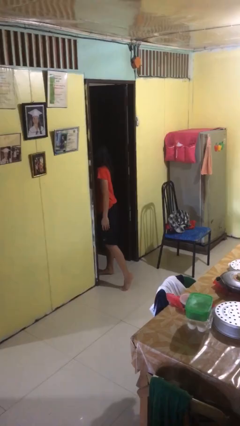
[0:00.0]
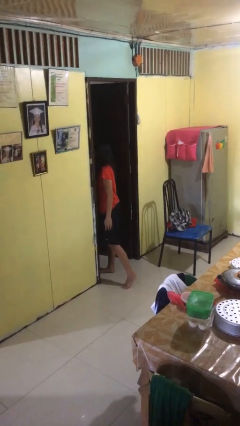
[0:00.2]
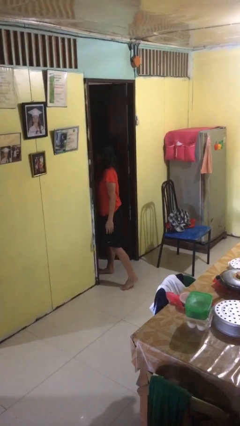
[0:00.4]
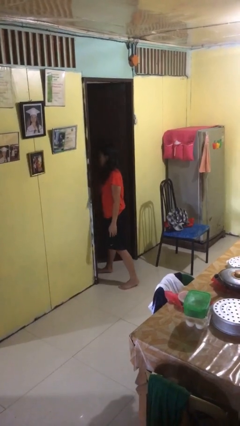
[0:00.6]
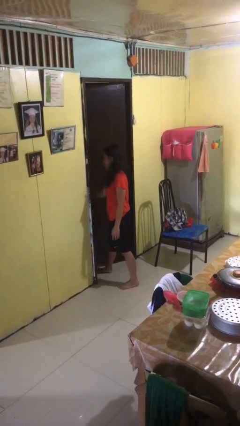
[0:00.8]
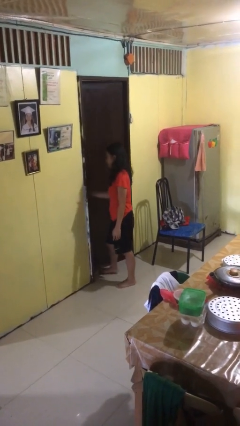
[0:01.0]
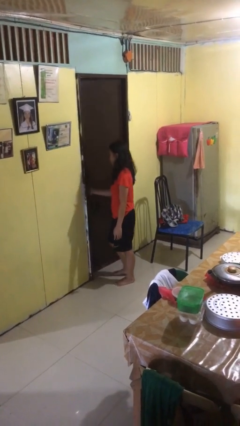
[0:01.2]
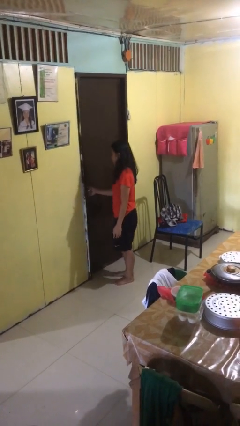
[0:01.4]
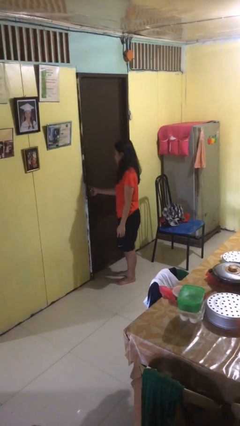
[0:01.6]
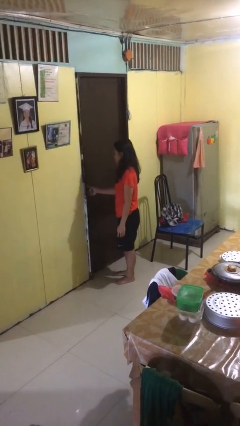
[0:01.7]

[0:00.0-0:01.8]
person closes facility door

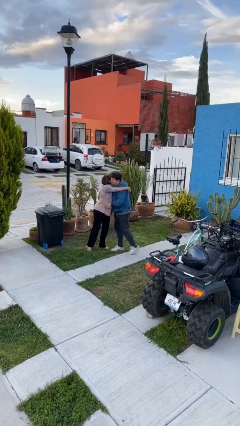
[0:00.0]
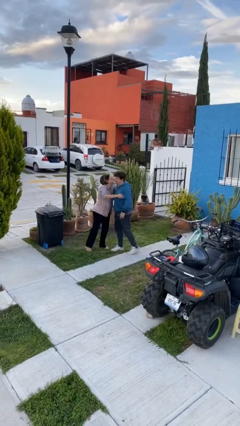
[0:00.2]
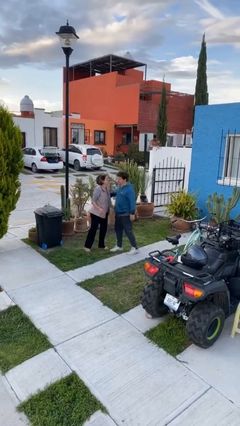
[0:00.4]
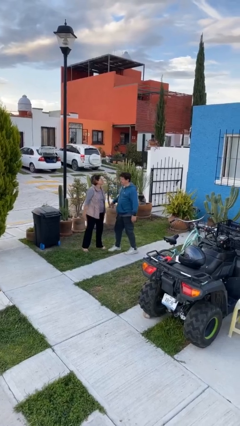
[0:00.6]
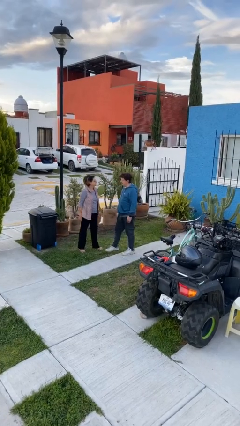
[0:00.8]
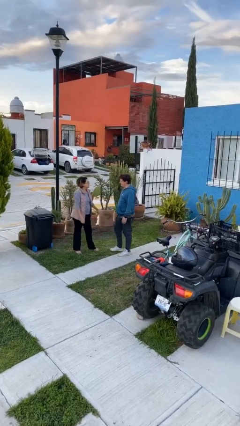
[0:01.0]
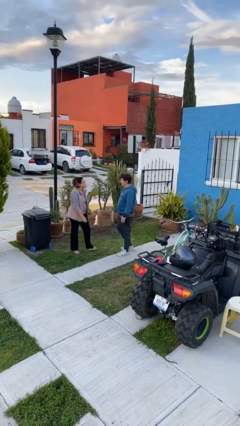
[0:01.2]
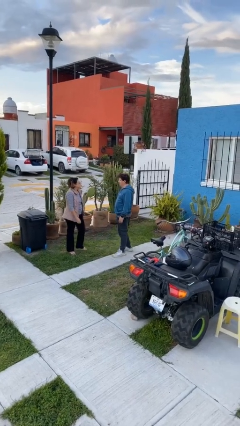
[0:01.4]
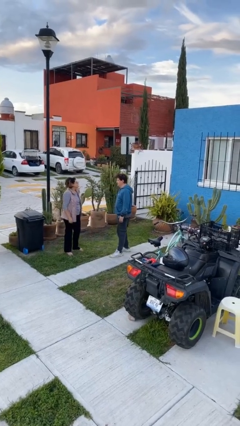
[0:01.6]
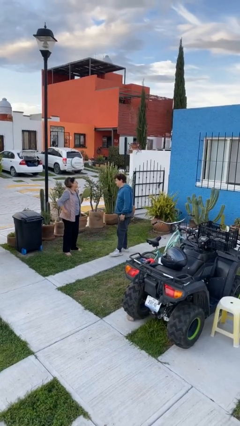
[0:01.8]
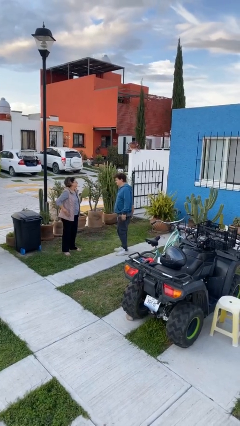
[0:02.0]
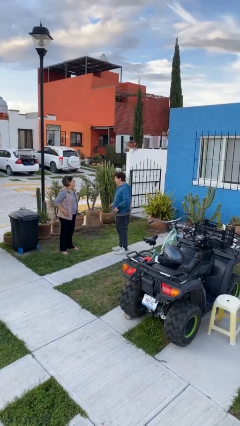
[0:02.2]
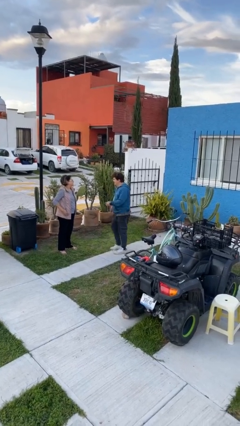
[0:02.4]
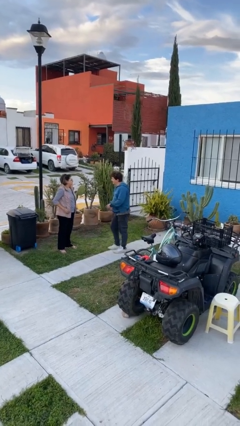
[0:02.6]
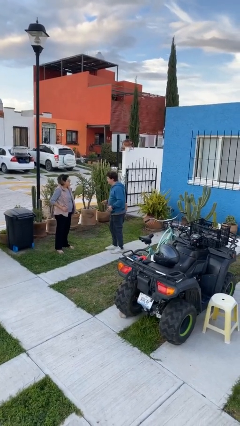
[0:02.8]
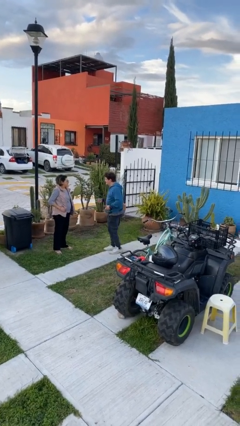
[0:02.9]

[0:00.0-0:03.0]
person talks to person

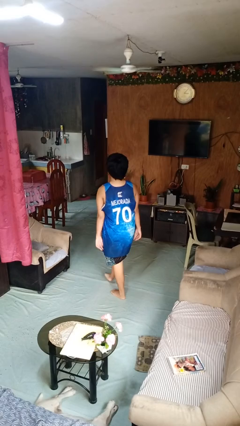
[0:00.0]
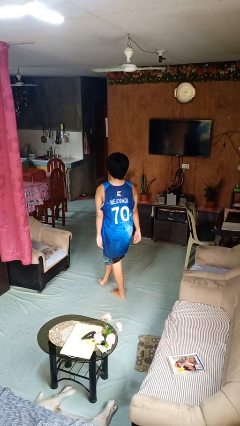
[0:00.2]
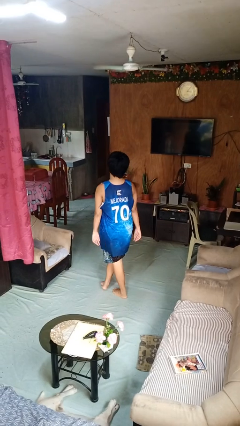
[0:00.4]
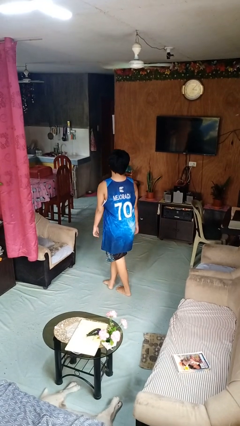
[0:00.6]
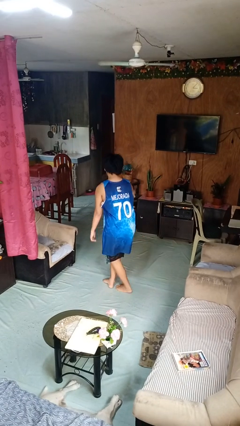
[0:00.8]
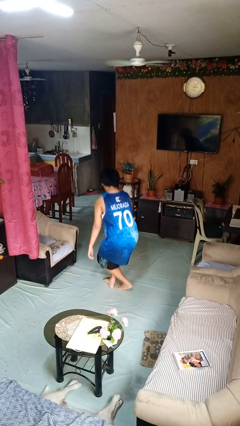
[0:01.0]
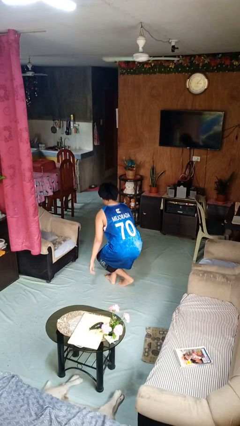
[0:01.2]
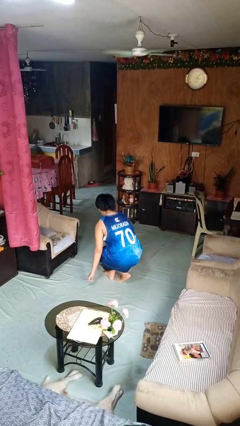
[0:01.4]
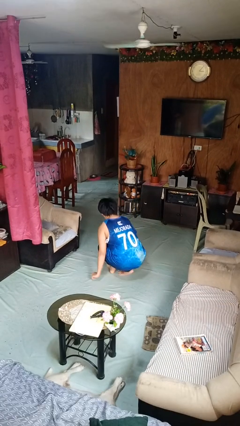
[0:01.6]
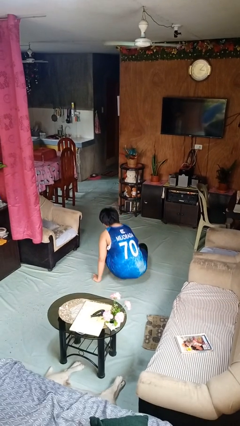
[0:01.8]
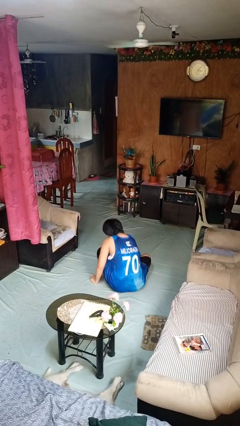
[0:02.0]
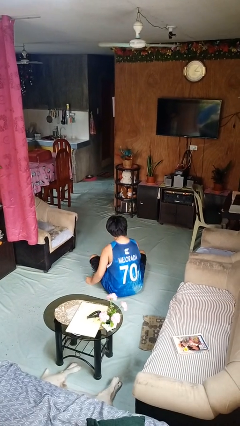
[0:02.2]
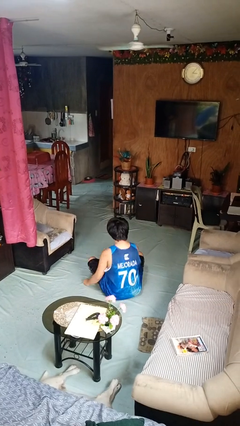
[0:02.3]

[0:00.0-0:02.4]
person sits crisscross

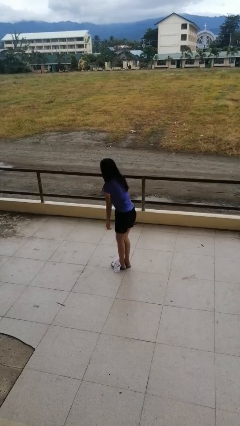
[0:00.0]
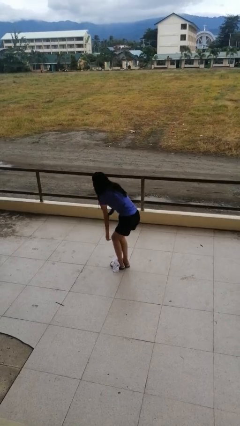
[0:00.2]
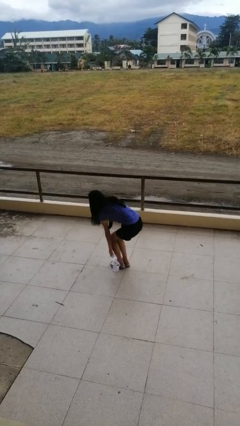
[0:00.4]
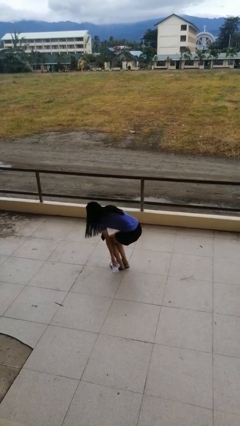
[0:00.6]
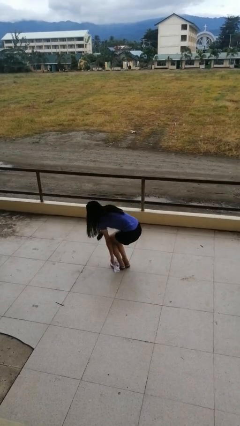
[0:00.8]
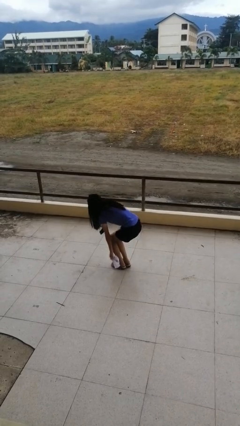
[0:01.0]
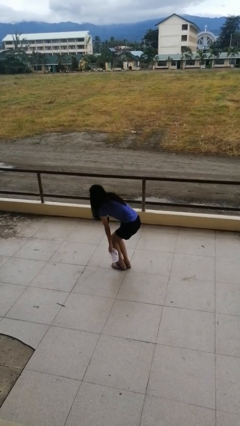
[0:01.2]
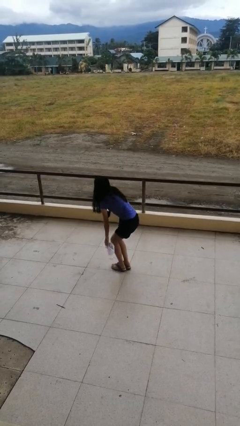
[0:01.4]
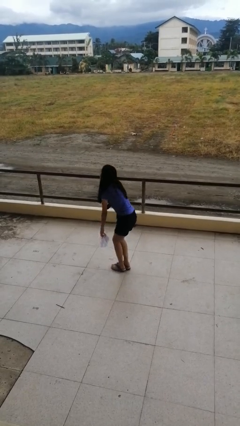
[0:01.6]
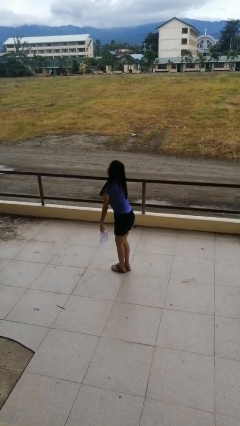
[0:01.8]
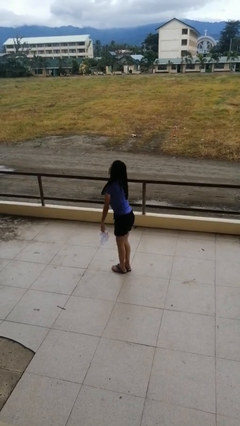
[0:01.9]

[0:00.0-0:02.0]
person picks up object from floor

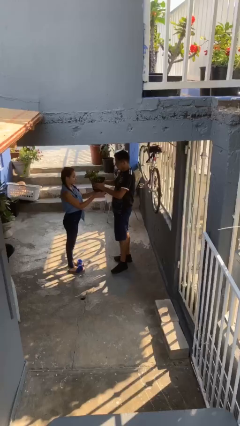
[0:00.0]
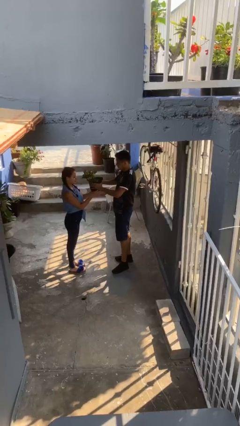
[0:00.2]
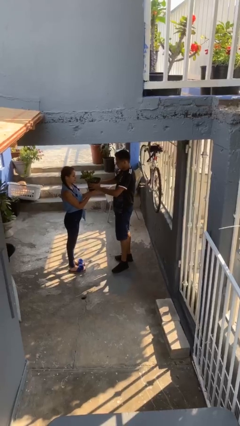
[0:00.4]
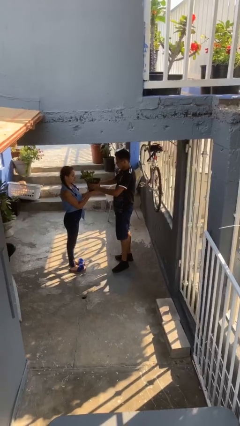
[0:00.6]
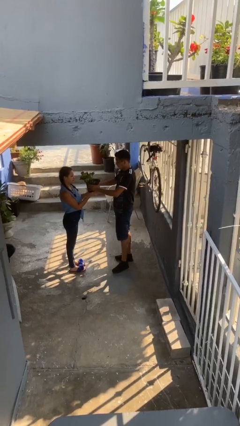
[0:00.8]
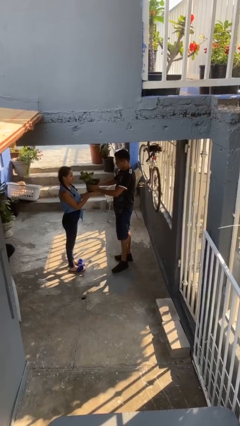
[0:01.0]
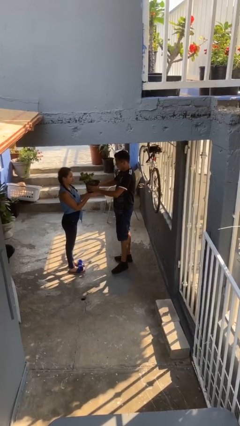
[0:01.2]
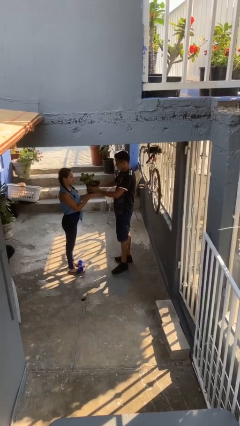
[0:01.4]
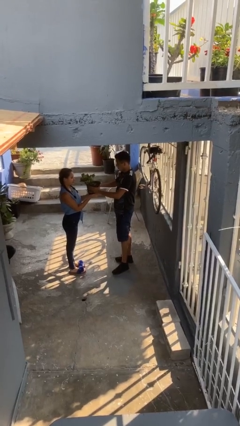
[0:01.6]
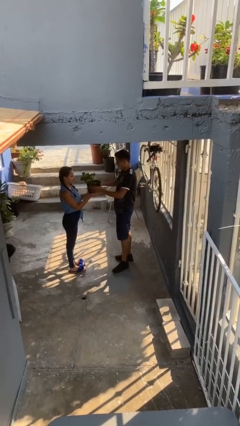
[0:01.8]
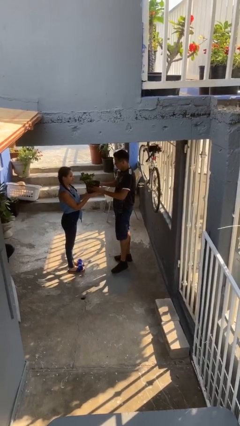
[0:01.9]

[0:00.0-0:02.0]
person transfers object to person

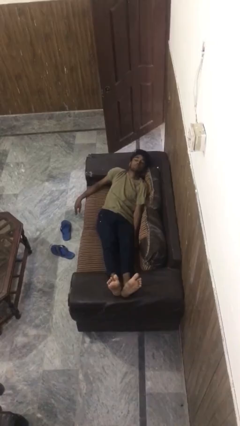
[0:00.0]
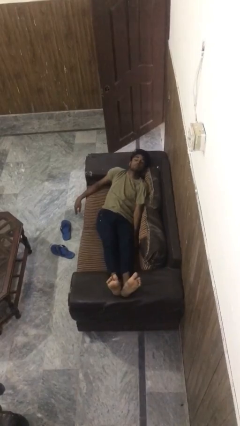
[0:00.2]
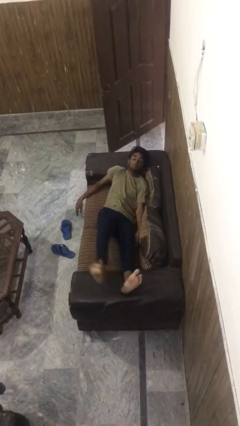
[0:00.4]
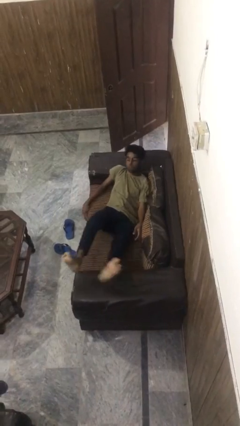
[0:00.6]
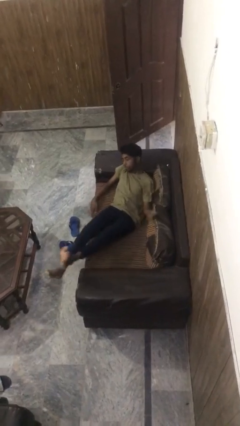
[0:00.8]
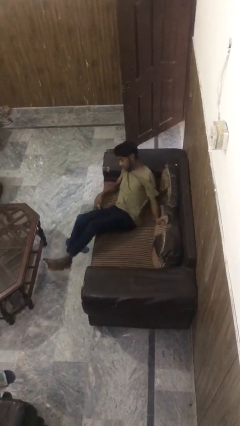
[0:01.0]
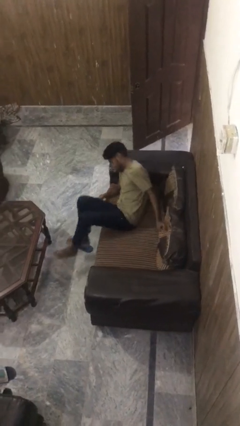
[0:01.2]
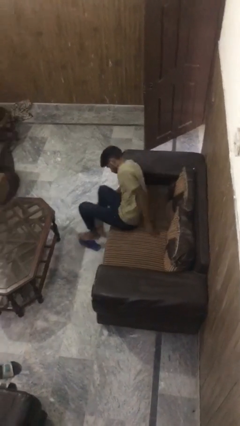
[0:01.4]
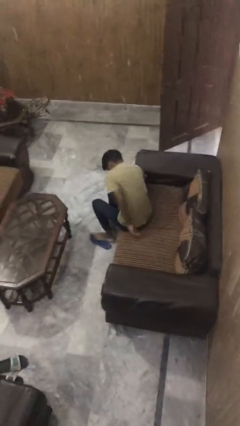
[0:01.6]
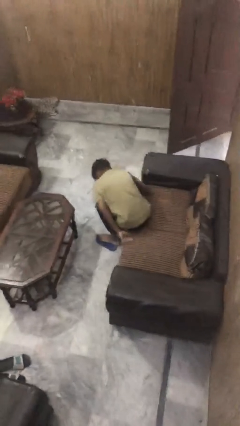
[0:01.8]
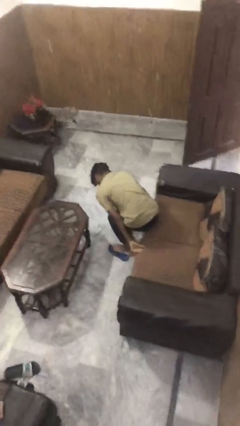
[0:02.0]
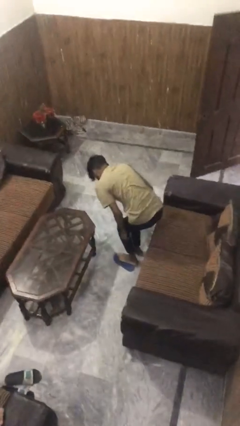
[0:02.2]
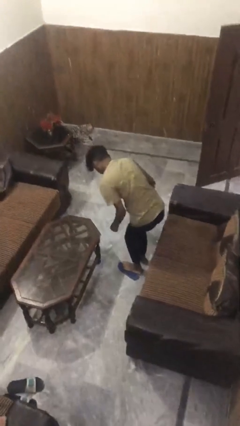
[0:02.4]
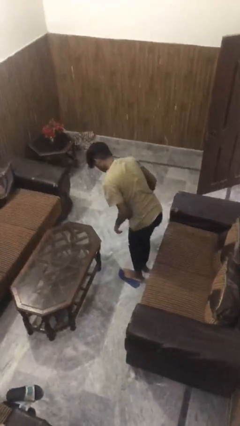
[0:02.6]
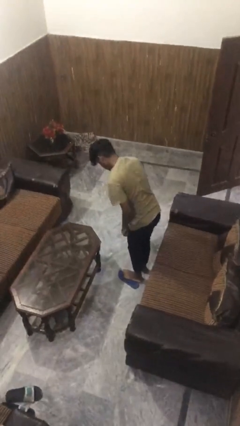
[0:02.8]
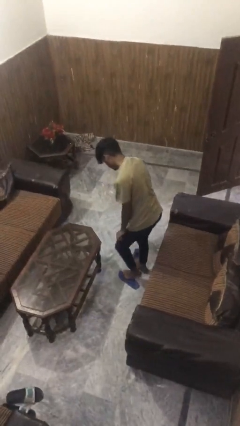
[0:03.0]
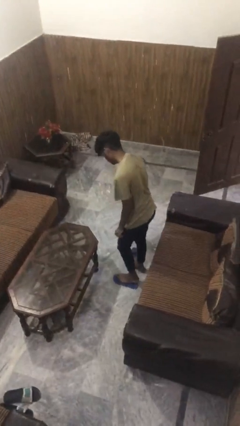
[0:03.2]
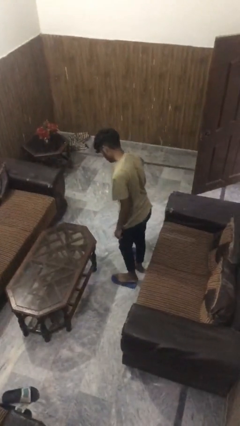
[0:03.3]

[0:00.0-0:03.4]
person stands up

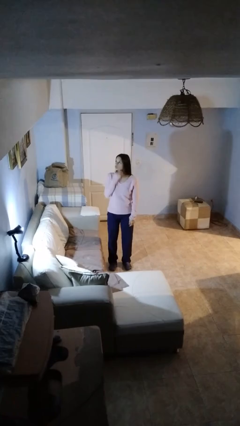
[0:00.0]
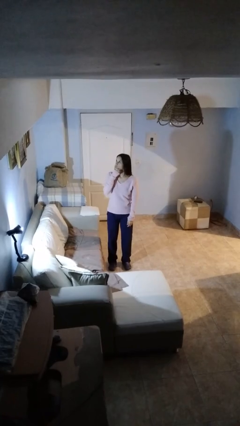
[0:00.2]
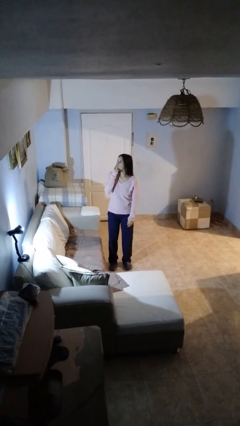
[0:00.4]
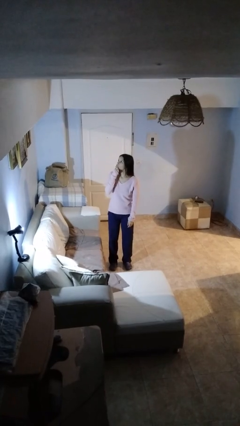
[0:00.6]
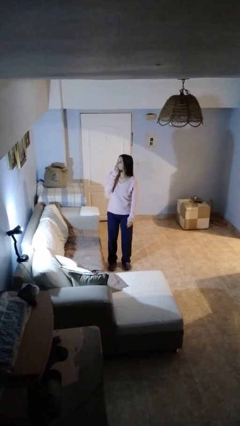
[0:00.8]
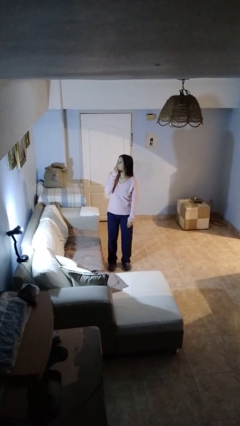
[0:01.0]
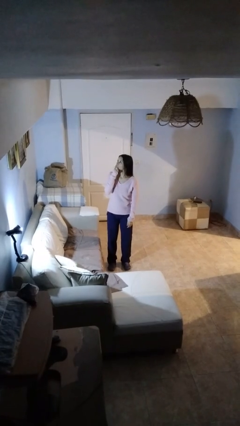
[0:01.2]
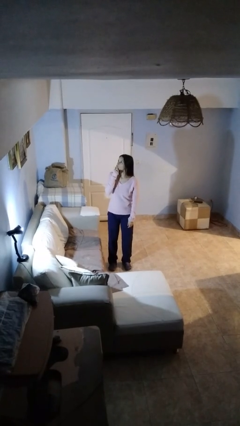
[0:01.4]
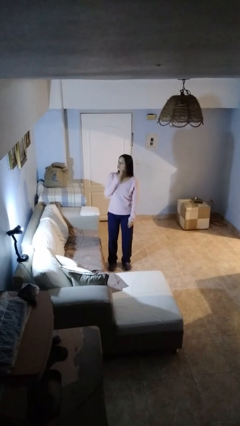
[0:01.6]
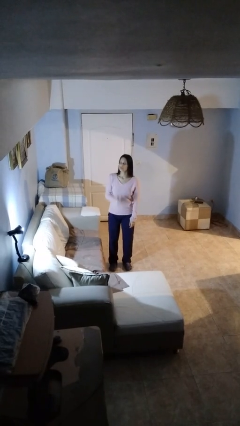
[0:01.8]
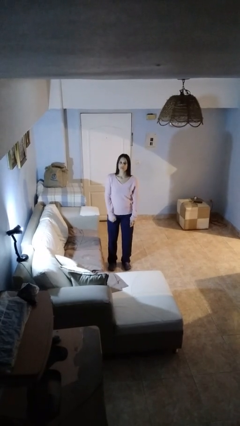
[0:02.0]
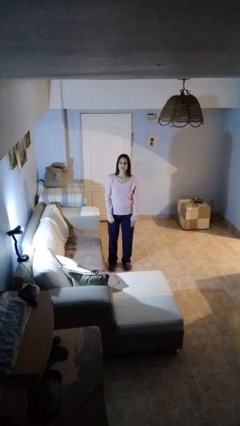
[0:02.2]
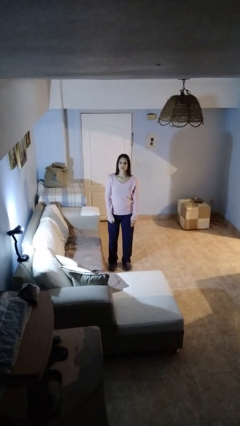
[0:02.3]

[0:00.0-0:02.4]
person strokes chin
